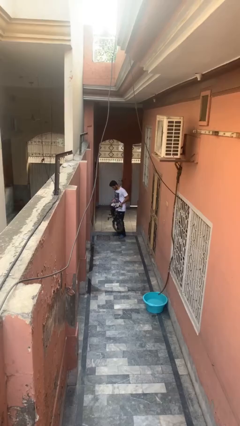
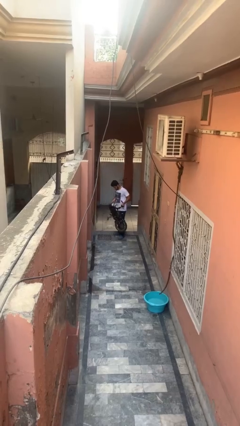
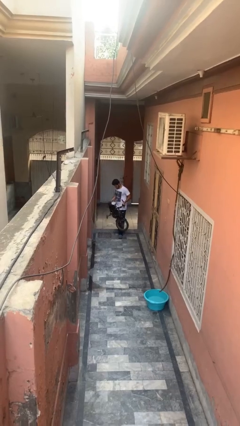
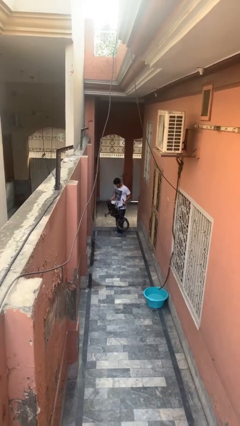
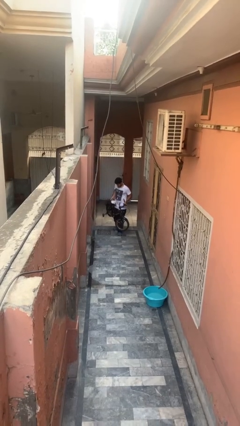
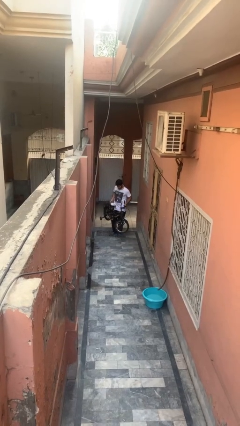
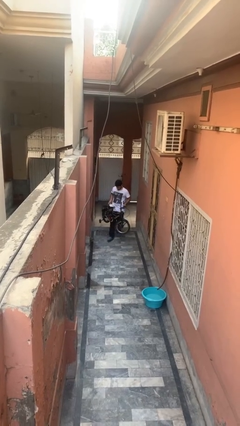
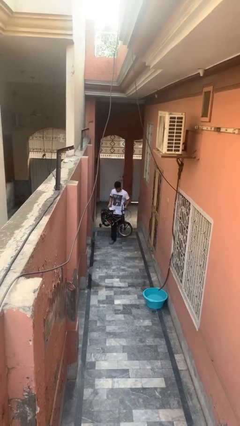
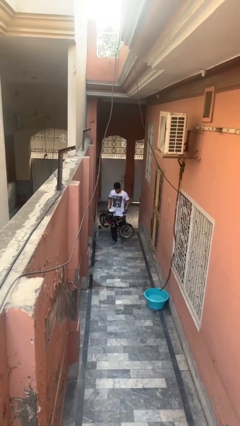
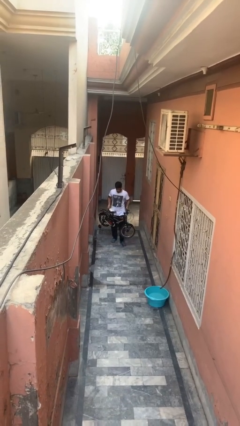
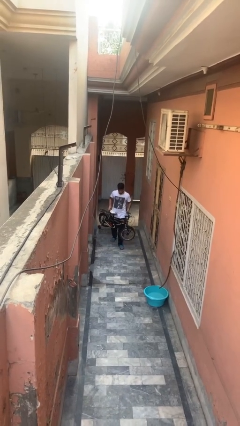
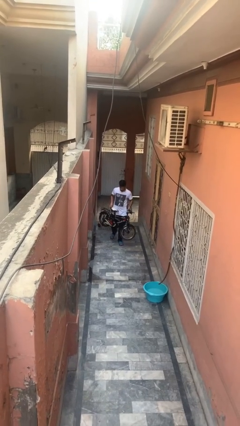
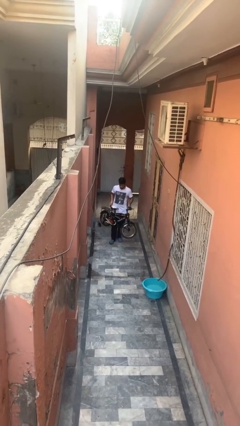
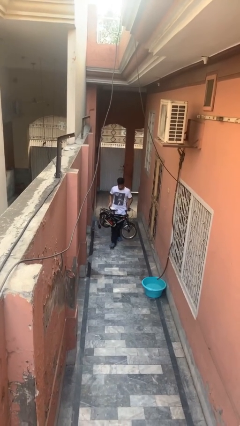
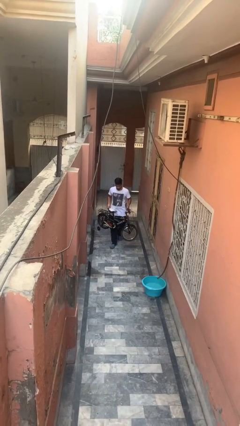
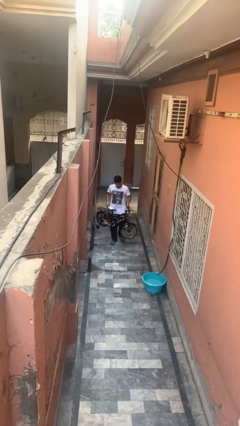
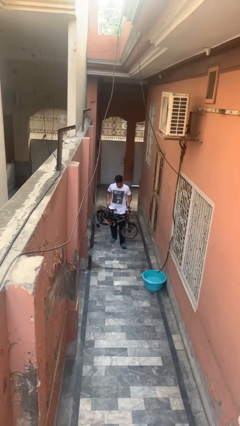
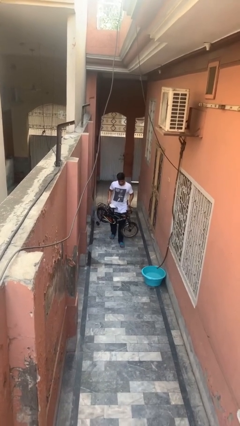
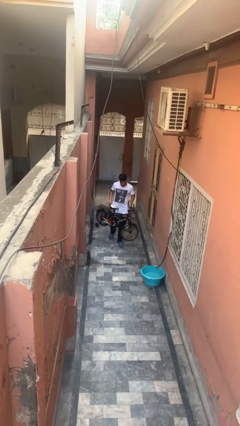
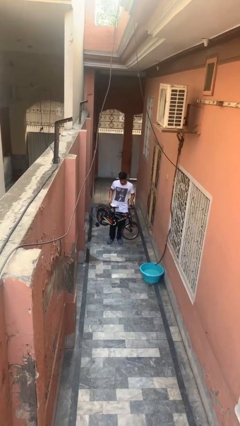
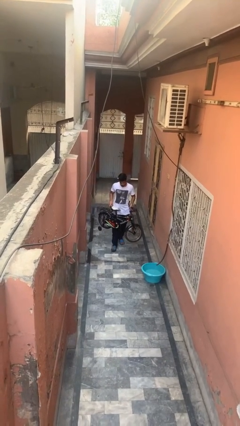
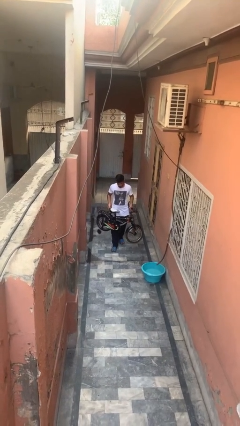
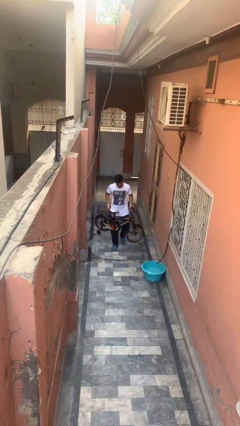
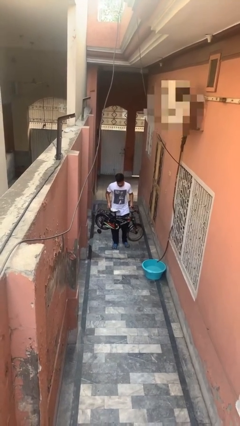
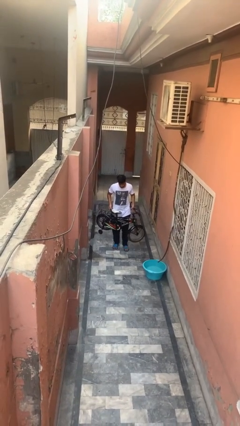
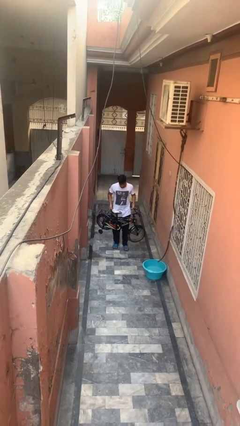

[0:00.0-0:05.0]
person carries bicycle

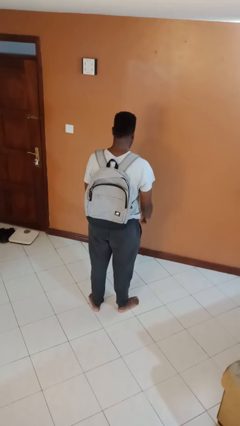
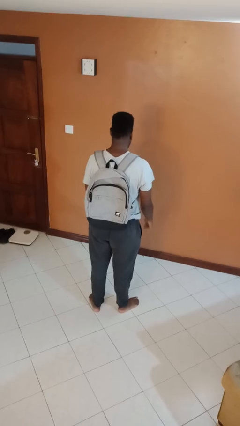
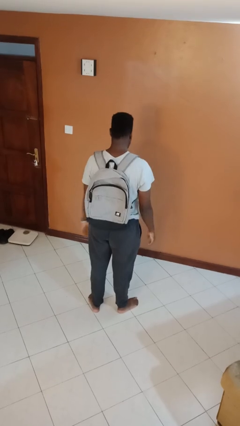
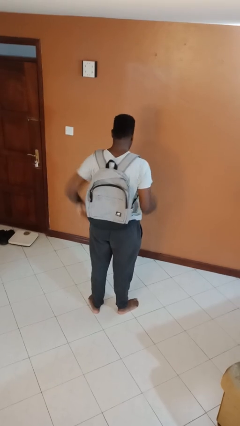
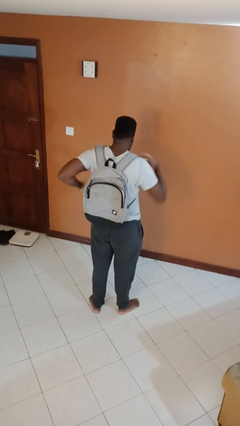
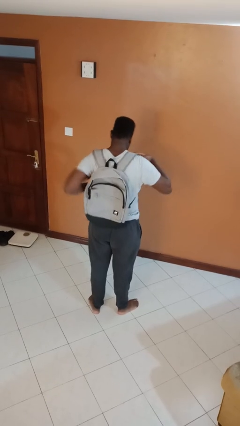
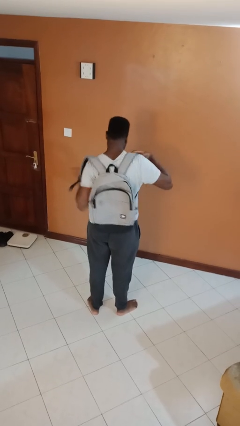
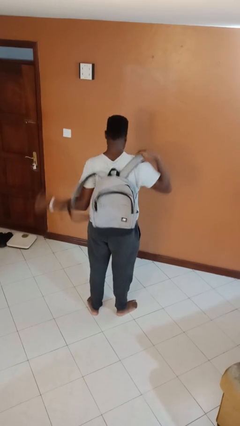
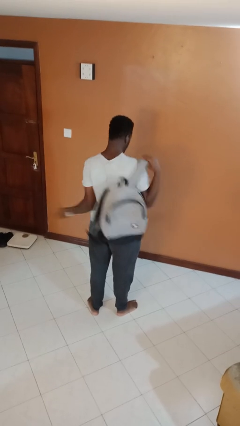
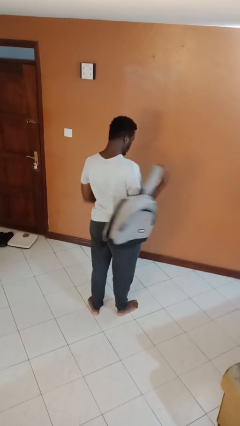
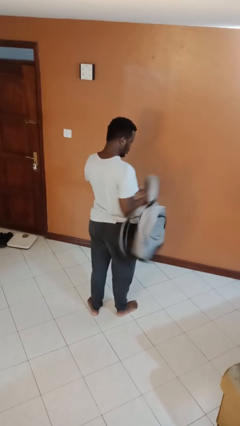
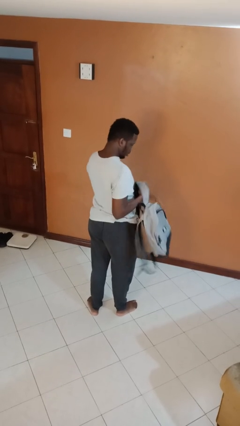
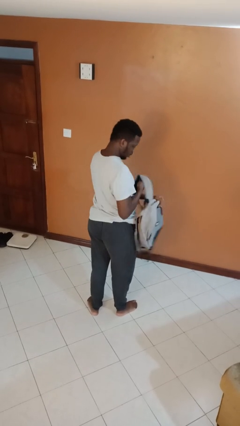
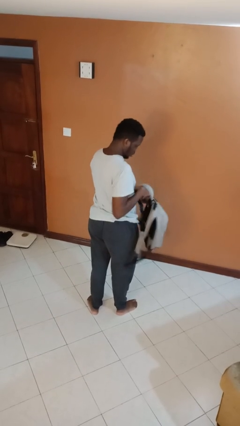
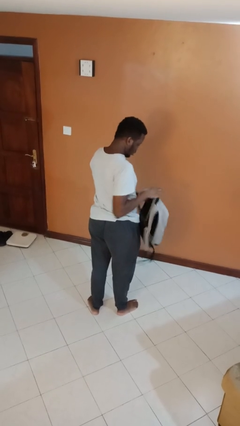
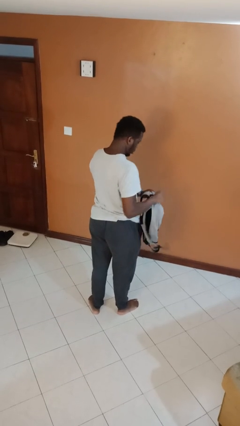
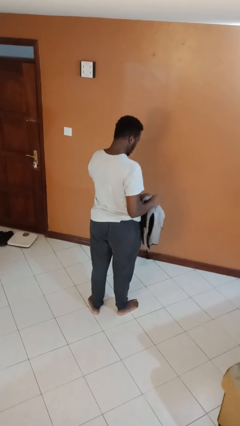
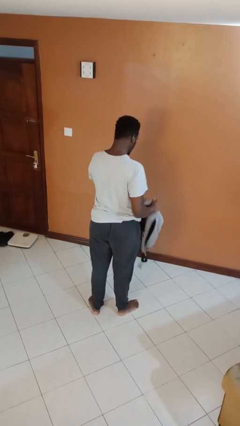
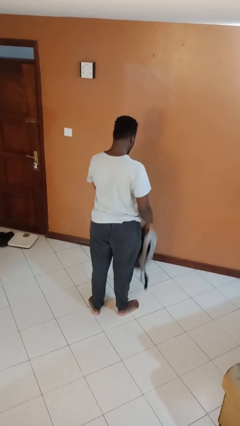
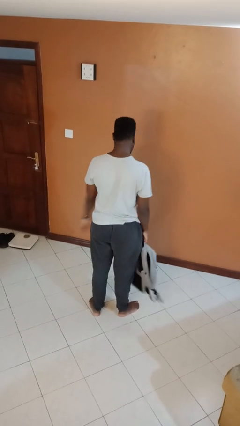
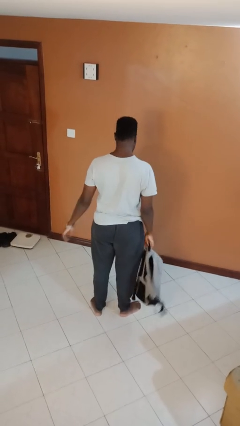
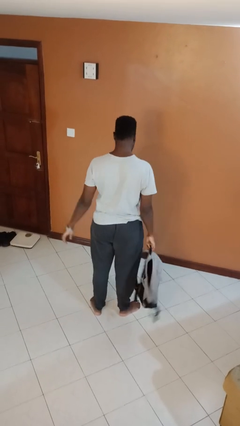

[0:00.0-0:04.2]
person takes off backpack

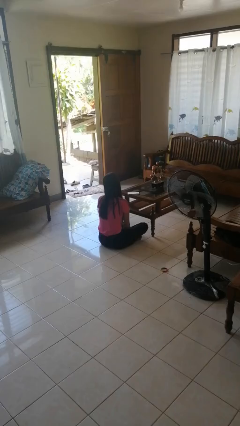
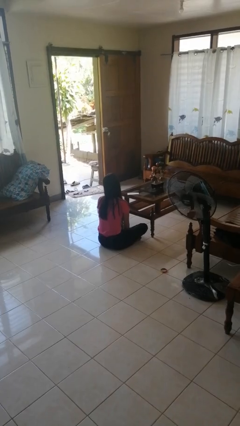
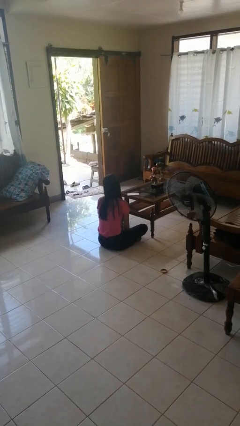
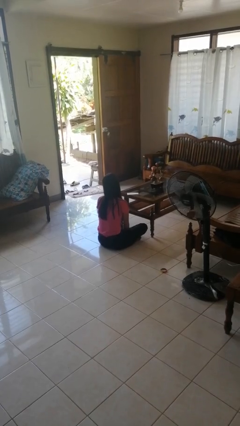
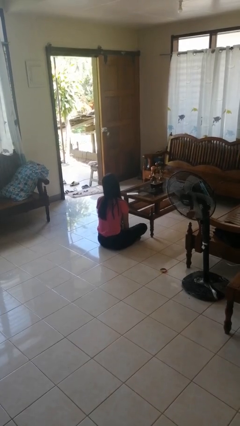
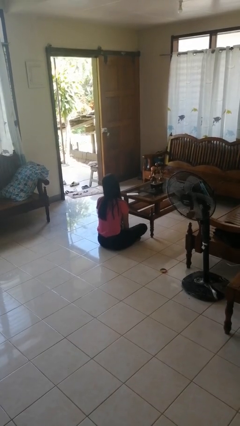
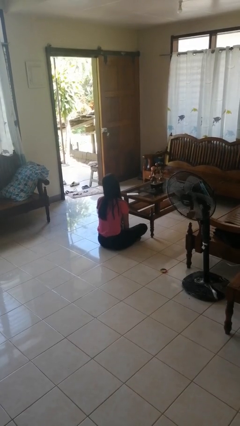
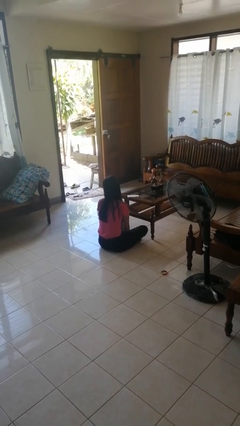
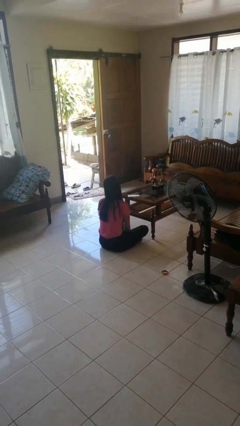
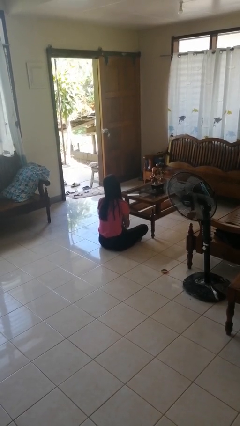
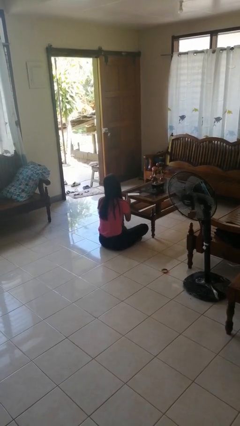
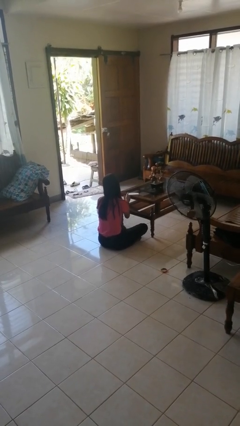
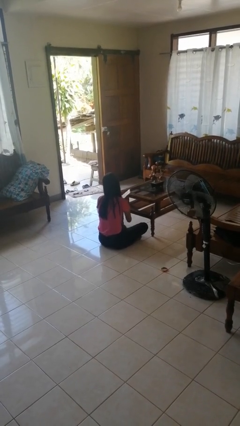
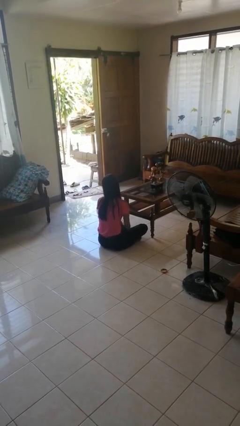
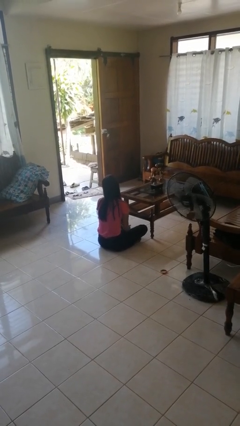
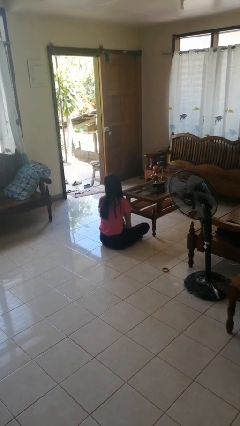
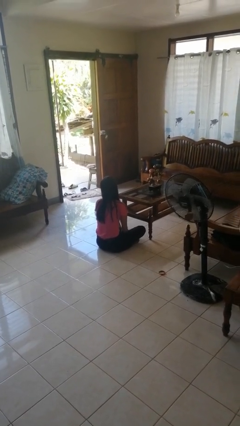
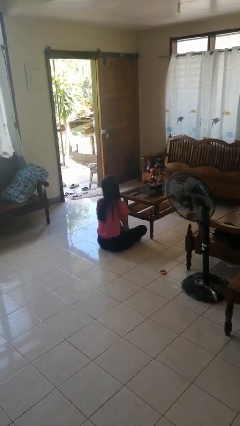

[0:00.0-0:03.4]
person picks up object from table

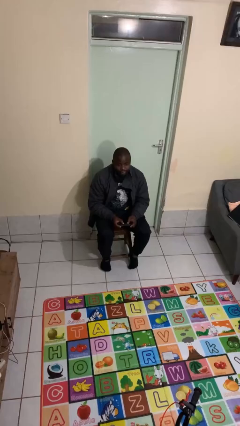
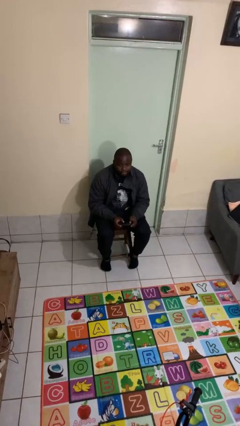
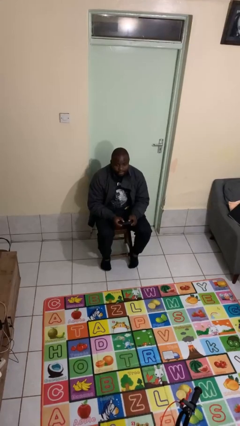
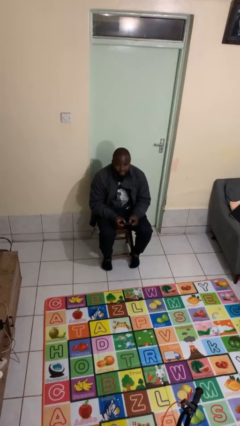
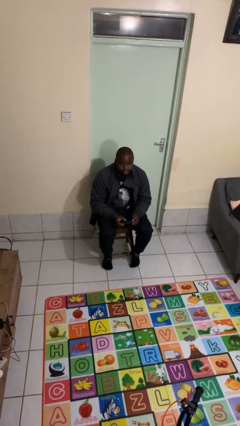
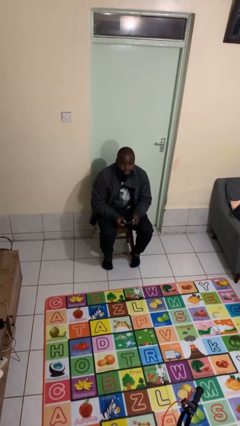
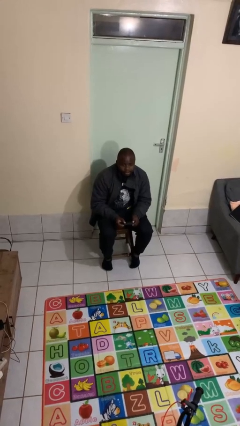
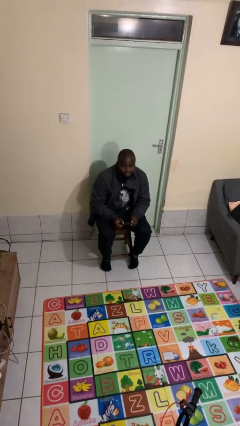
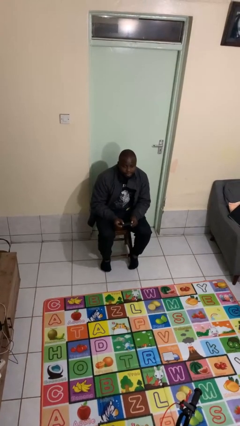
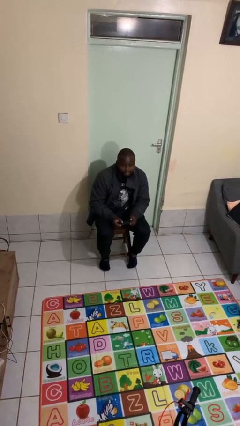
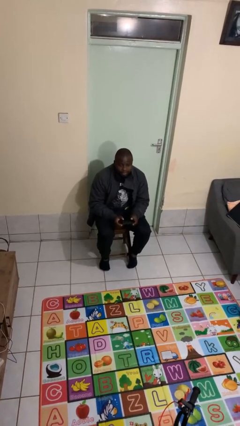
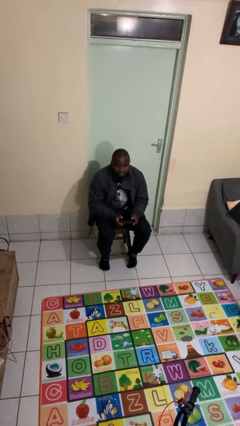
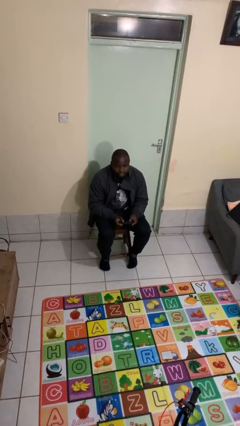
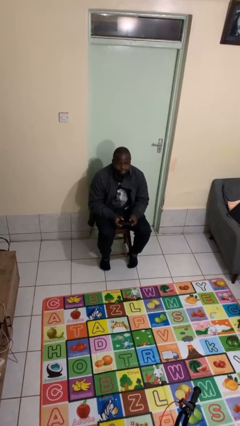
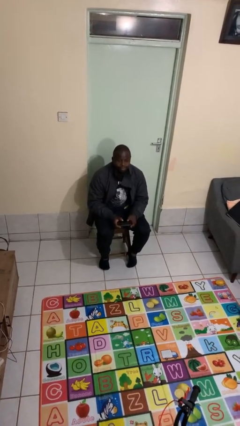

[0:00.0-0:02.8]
person interacts with handheld game

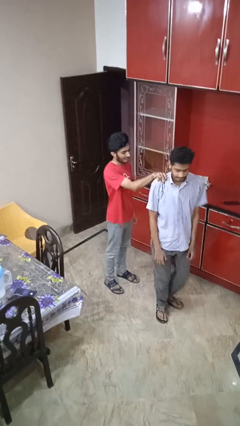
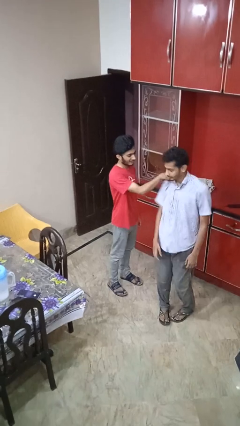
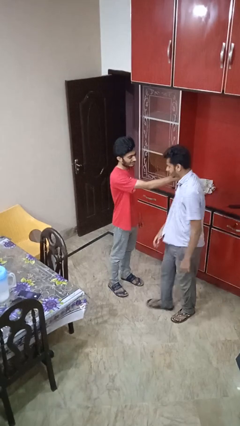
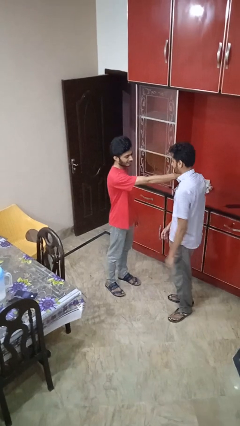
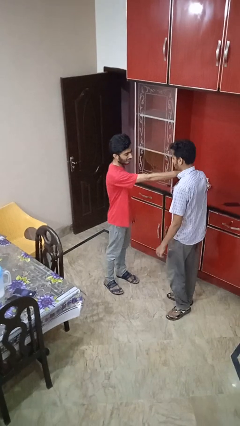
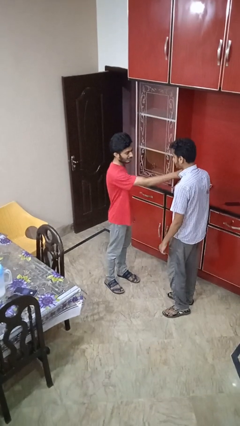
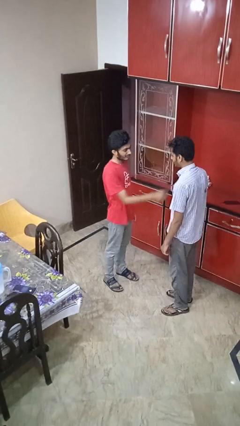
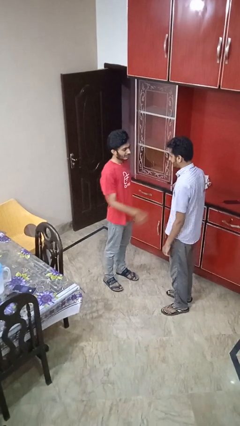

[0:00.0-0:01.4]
person spins person around

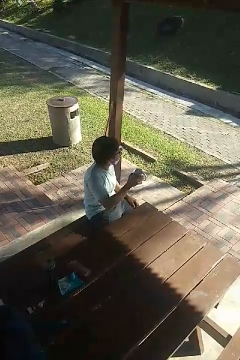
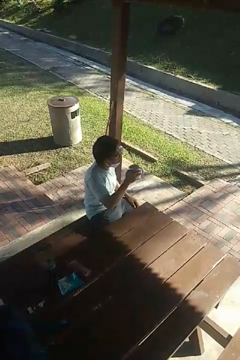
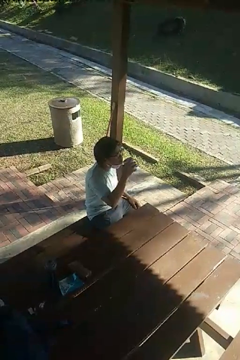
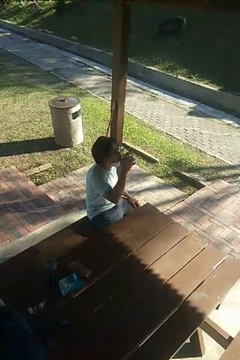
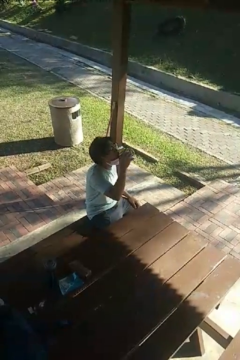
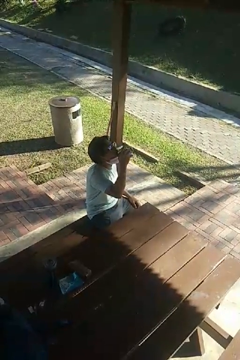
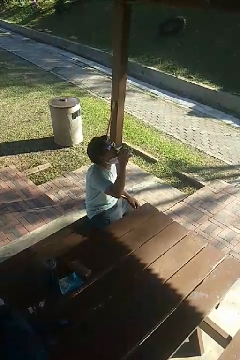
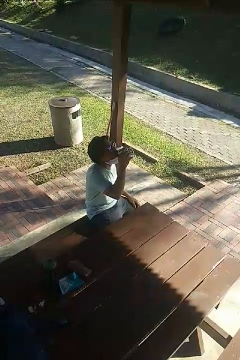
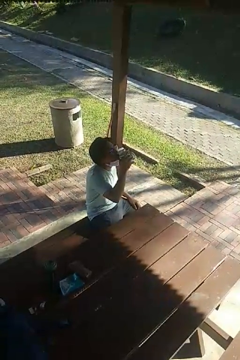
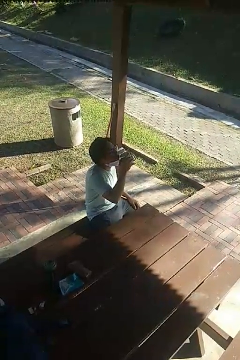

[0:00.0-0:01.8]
person drinks from mug
